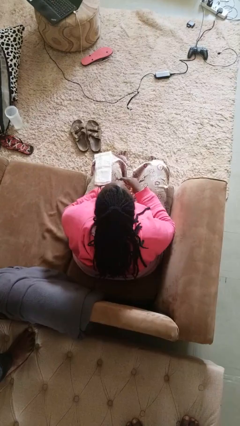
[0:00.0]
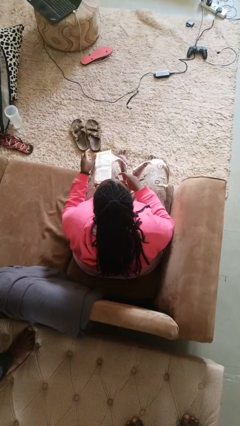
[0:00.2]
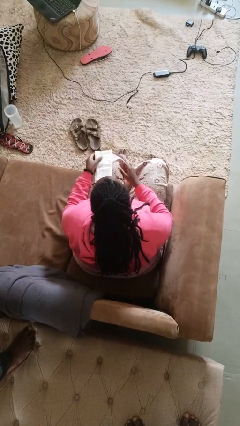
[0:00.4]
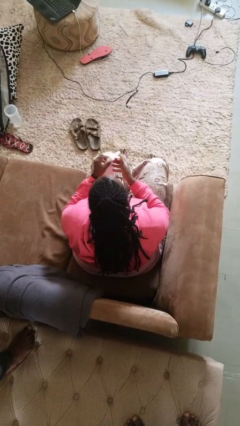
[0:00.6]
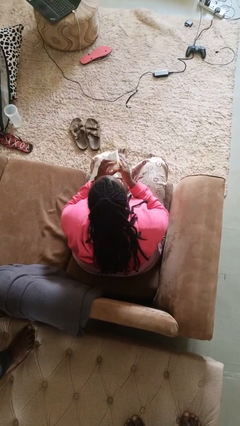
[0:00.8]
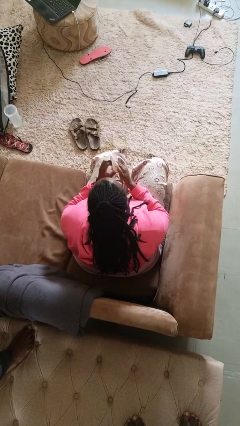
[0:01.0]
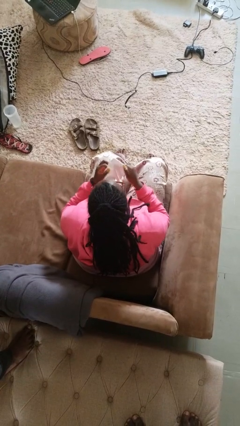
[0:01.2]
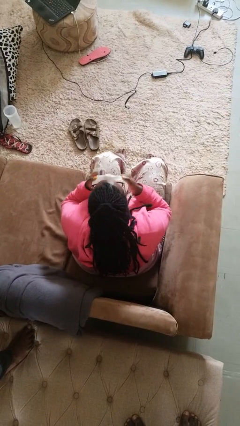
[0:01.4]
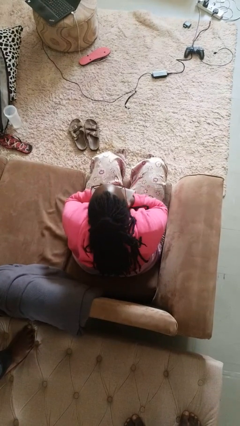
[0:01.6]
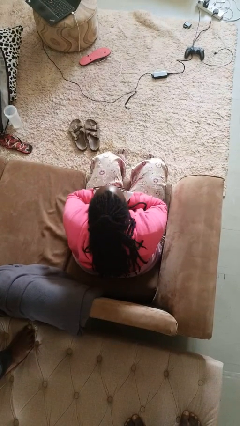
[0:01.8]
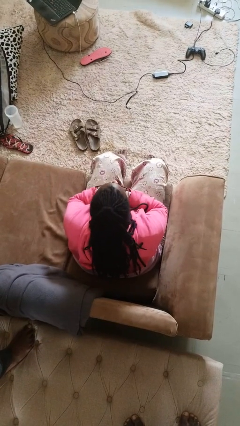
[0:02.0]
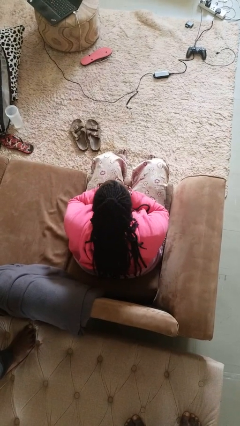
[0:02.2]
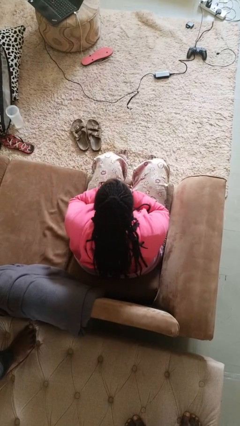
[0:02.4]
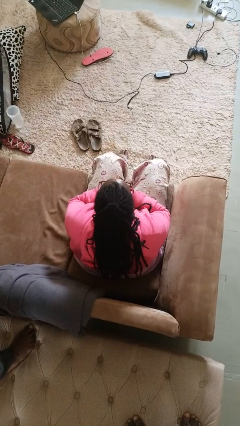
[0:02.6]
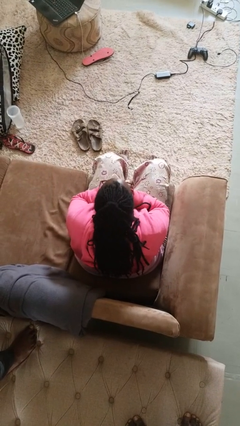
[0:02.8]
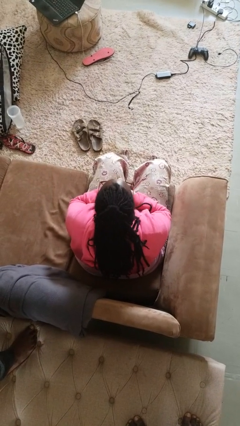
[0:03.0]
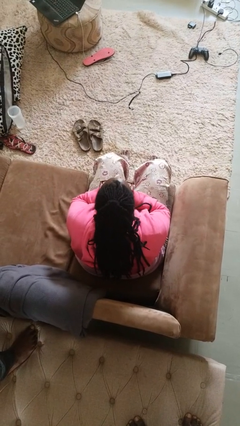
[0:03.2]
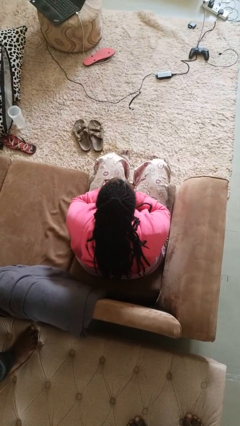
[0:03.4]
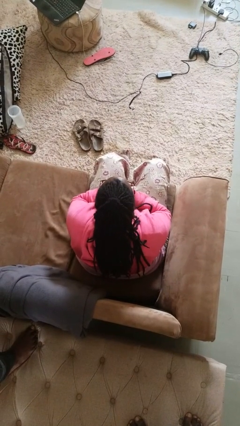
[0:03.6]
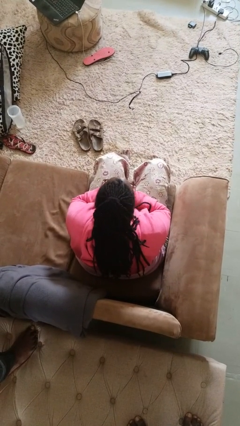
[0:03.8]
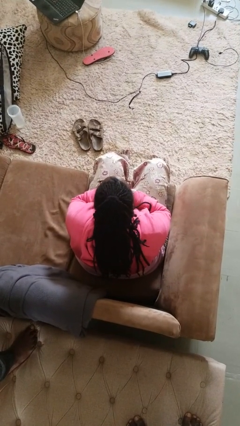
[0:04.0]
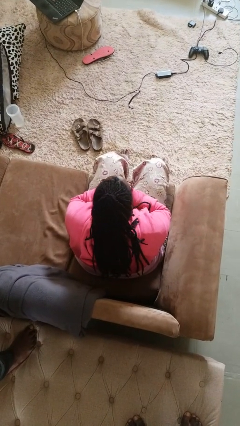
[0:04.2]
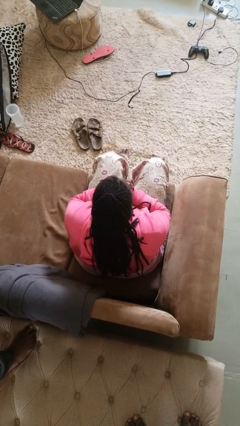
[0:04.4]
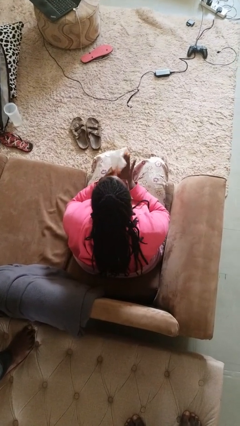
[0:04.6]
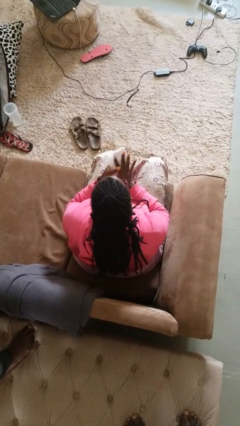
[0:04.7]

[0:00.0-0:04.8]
person blows nose

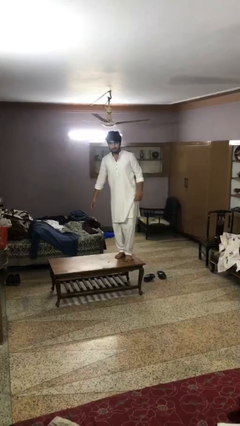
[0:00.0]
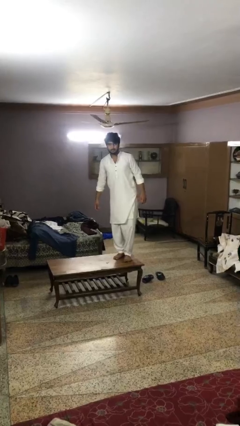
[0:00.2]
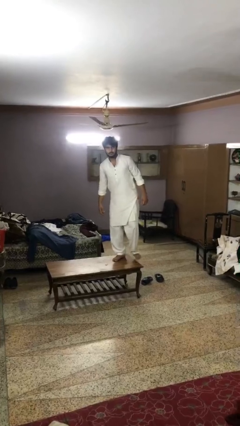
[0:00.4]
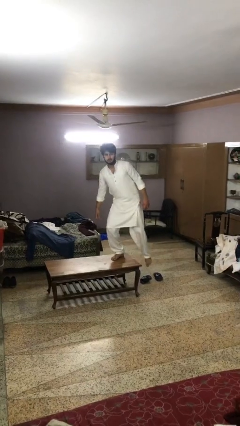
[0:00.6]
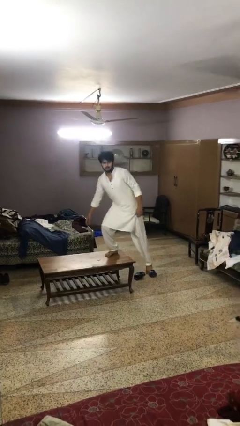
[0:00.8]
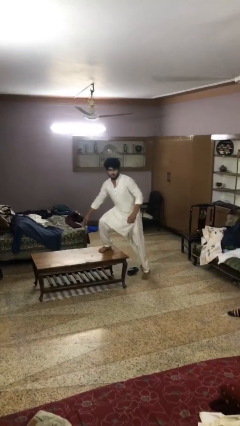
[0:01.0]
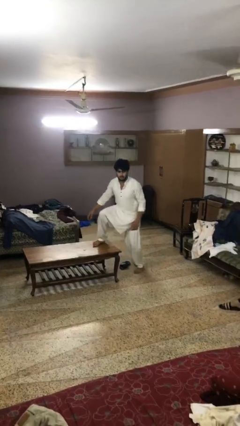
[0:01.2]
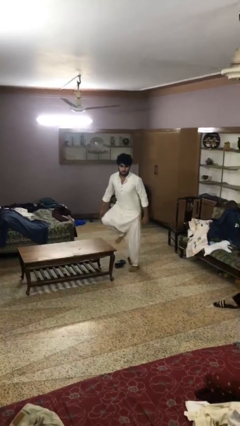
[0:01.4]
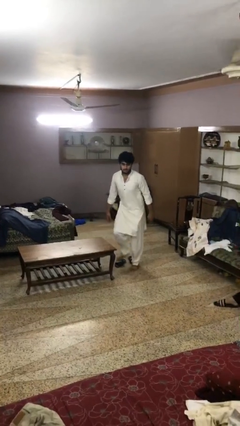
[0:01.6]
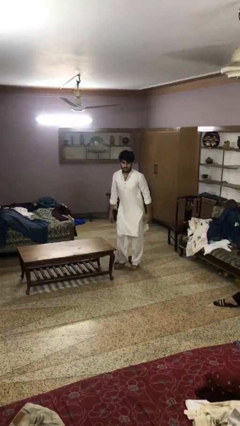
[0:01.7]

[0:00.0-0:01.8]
person climbs off table

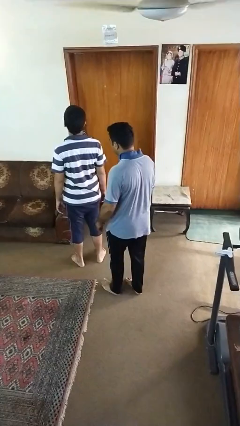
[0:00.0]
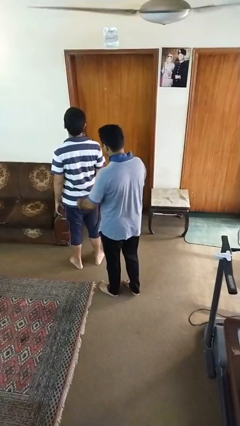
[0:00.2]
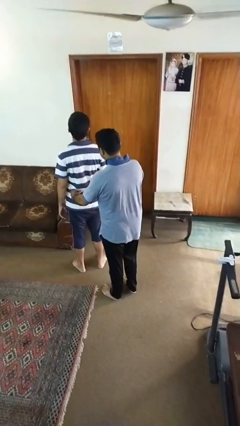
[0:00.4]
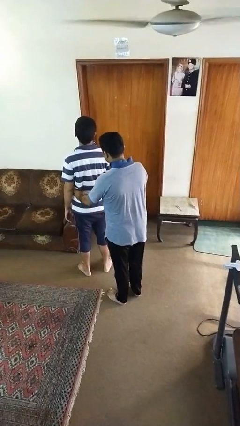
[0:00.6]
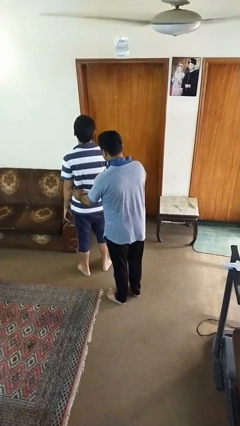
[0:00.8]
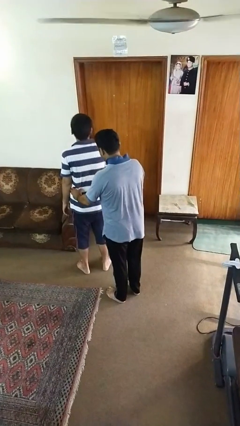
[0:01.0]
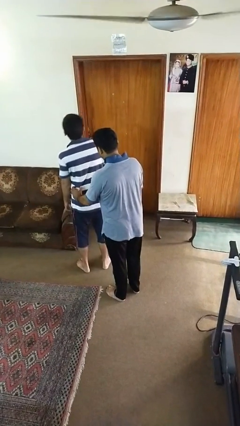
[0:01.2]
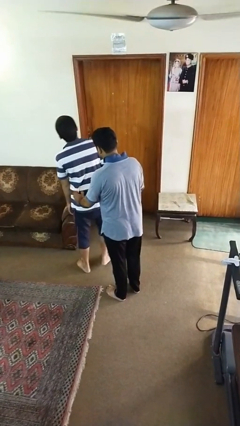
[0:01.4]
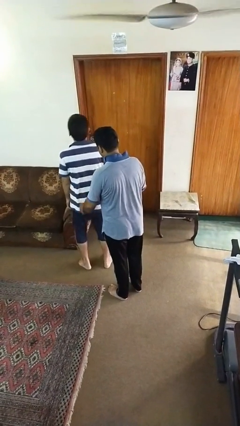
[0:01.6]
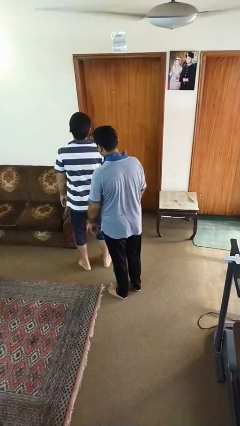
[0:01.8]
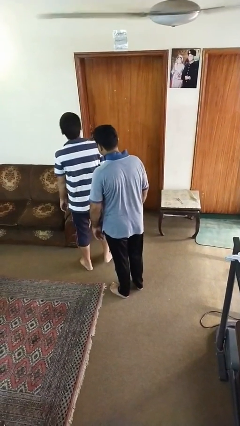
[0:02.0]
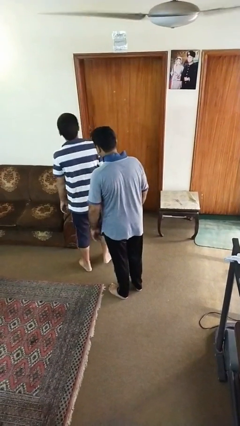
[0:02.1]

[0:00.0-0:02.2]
person tickles person

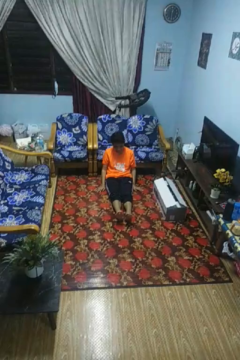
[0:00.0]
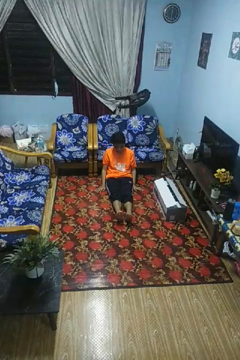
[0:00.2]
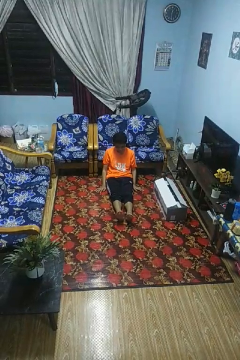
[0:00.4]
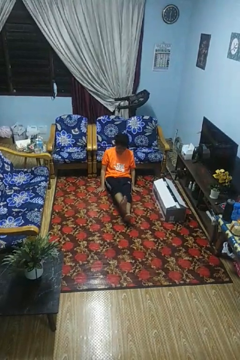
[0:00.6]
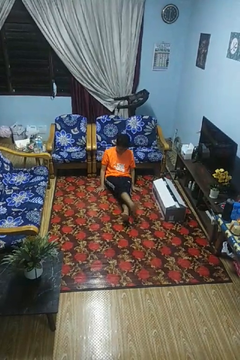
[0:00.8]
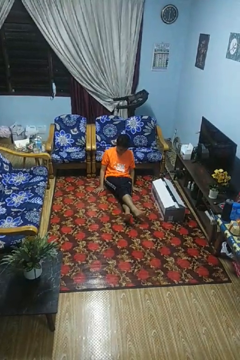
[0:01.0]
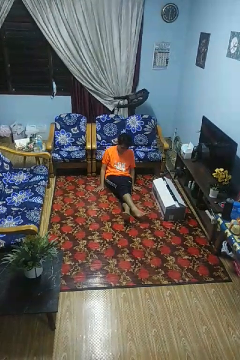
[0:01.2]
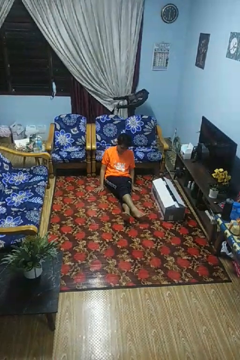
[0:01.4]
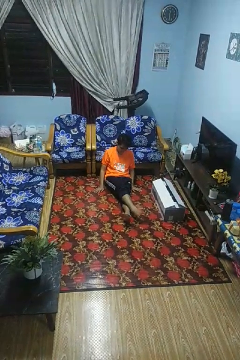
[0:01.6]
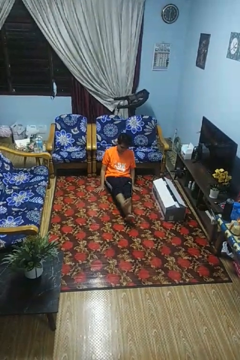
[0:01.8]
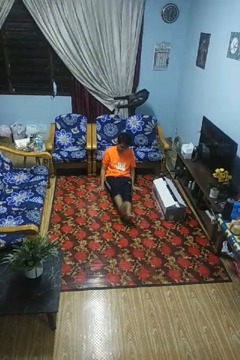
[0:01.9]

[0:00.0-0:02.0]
person crosses legs

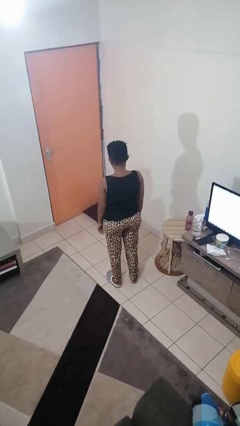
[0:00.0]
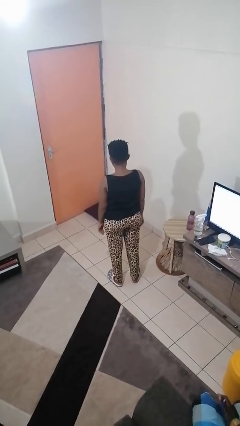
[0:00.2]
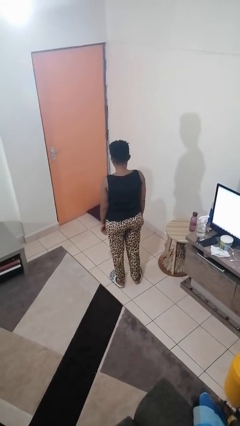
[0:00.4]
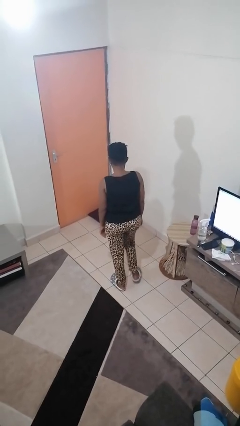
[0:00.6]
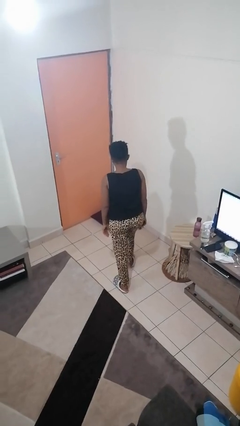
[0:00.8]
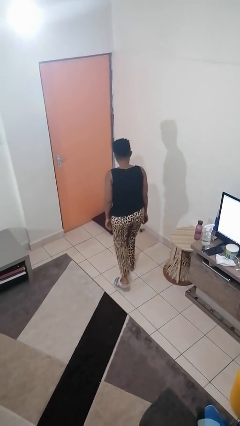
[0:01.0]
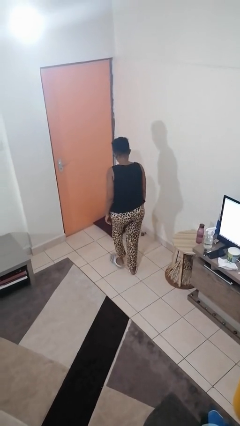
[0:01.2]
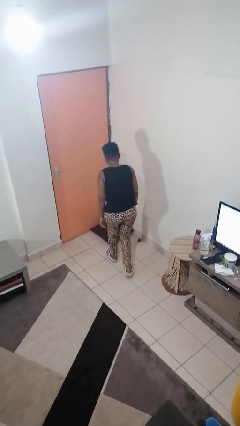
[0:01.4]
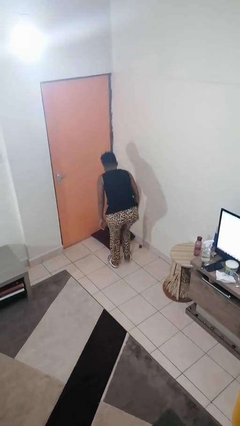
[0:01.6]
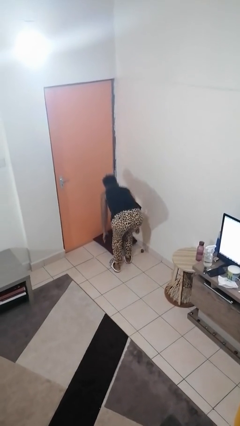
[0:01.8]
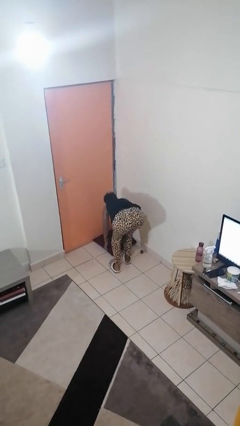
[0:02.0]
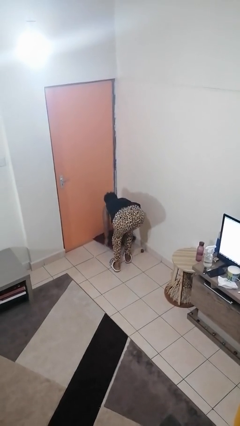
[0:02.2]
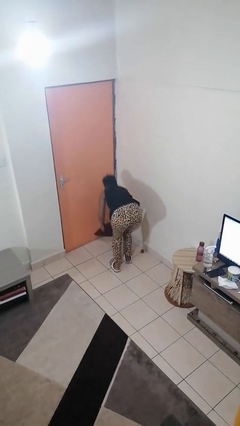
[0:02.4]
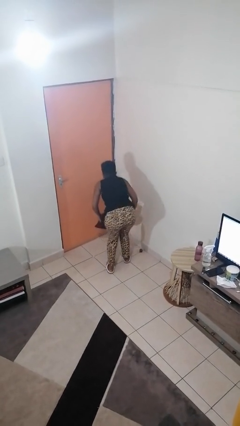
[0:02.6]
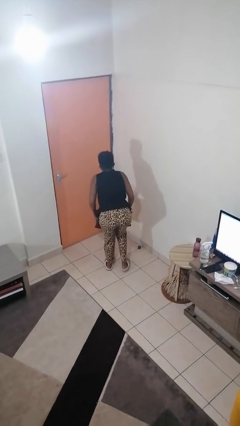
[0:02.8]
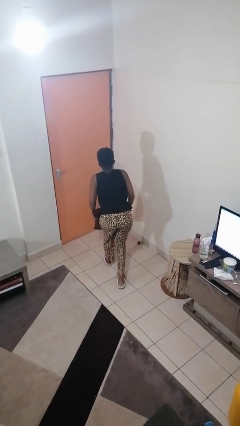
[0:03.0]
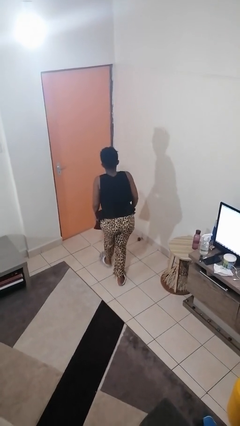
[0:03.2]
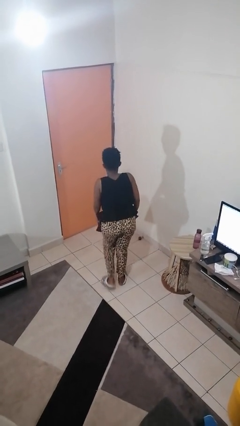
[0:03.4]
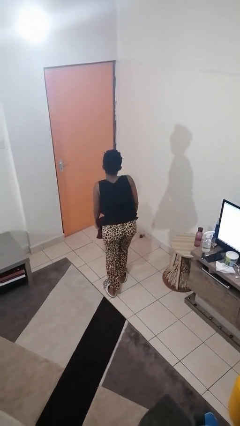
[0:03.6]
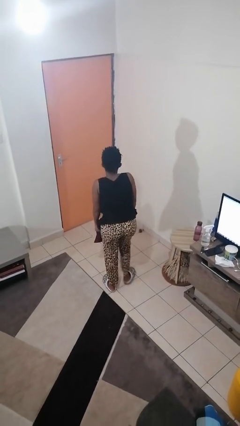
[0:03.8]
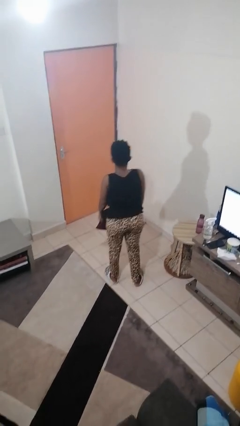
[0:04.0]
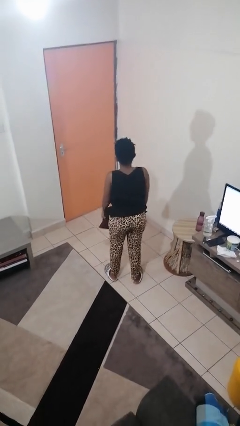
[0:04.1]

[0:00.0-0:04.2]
person picks up object from floor

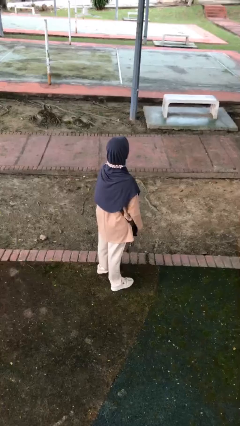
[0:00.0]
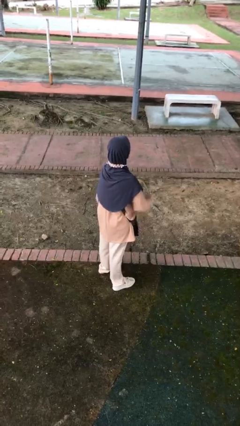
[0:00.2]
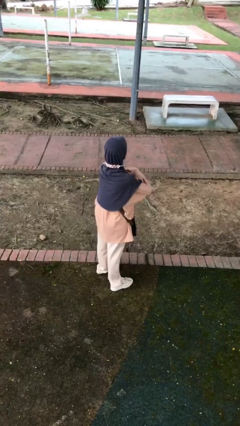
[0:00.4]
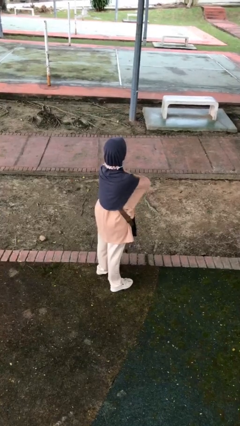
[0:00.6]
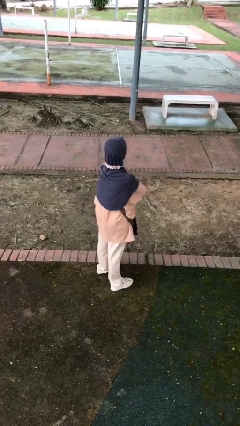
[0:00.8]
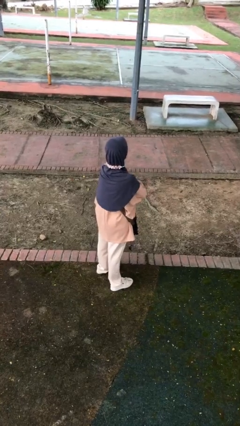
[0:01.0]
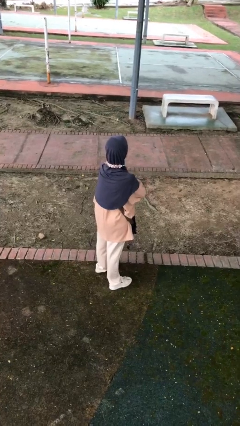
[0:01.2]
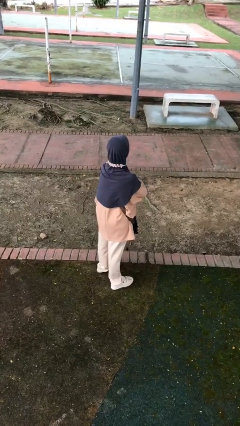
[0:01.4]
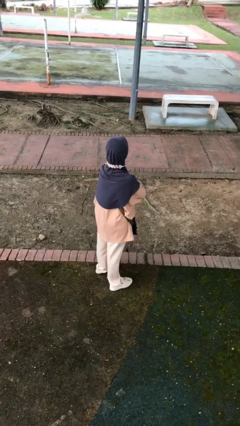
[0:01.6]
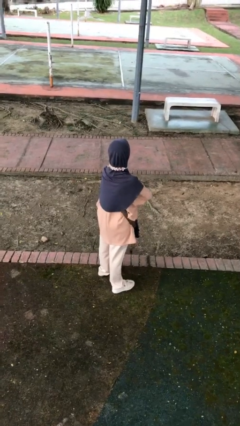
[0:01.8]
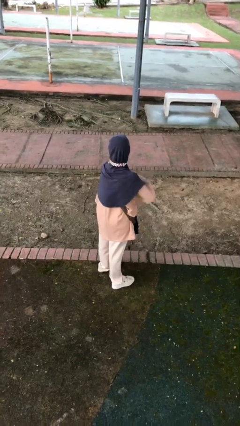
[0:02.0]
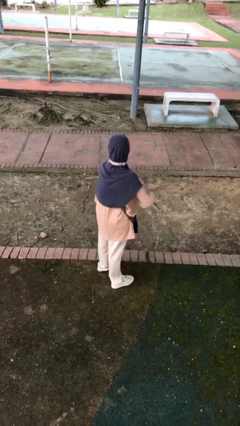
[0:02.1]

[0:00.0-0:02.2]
person crosses arms

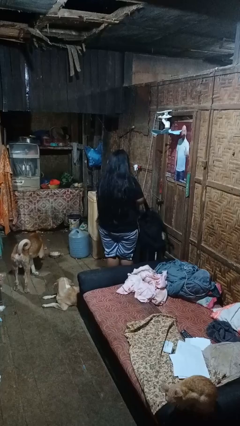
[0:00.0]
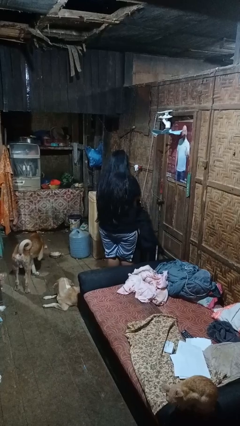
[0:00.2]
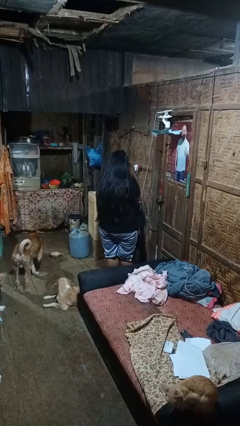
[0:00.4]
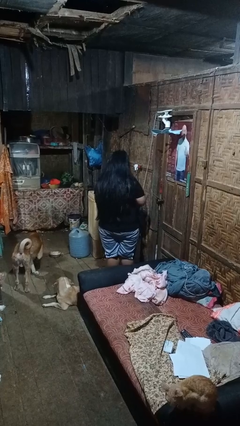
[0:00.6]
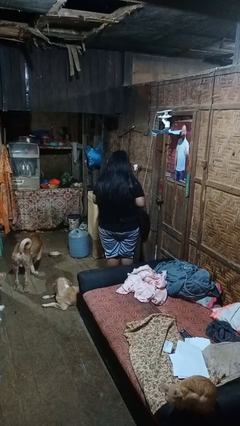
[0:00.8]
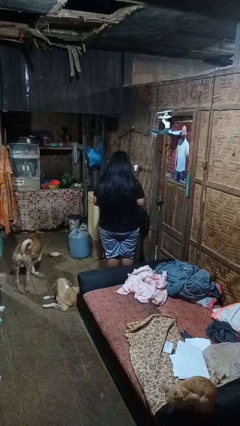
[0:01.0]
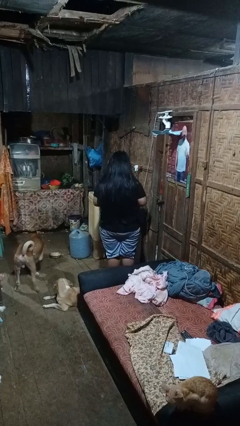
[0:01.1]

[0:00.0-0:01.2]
person takes off backpack
